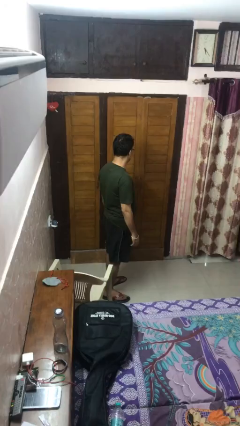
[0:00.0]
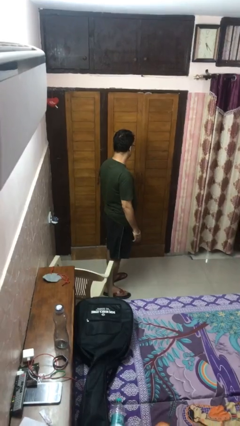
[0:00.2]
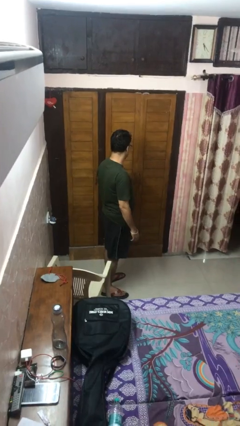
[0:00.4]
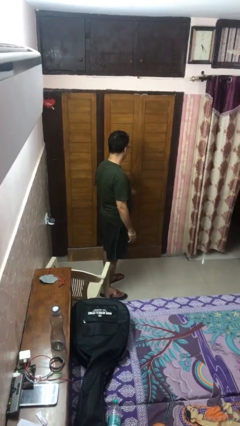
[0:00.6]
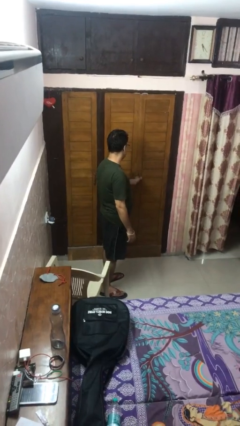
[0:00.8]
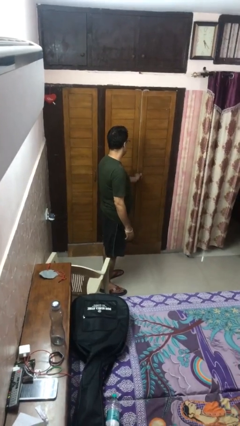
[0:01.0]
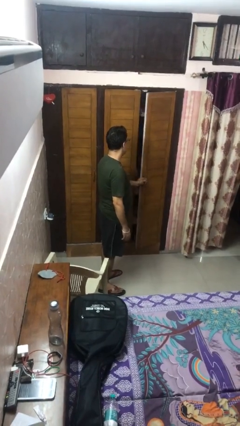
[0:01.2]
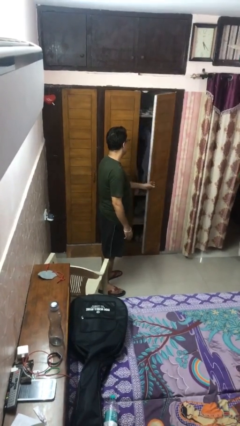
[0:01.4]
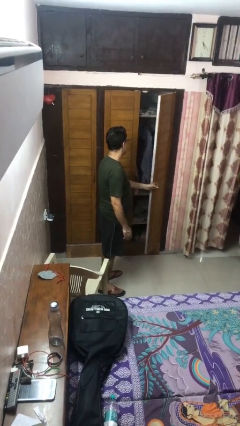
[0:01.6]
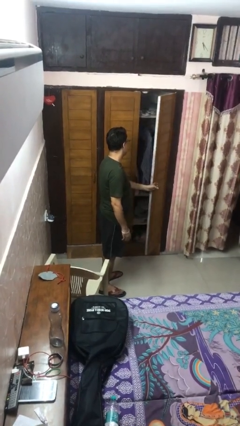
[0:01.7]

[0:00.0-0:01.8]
person opens closet door

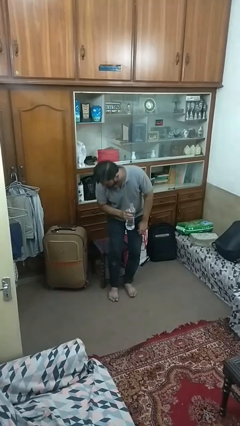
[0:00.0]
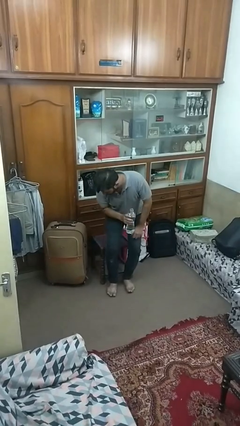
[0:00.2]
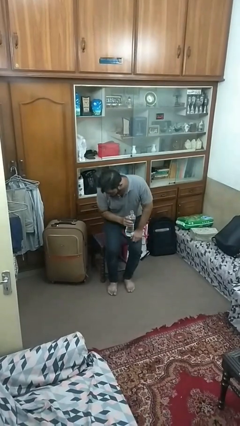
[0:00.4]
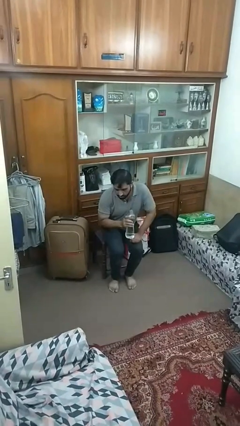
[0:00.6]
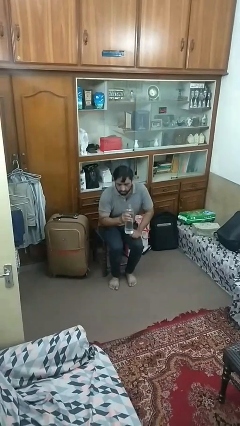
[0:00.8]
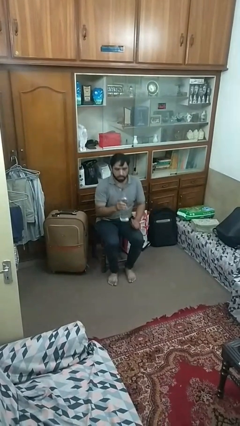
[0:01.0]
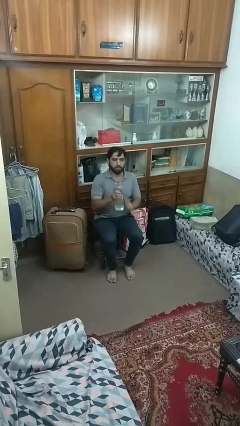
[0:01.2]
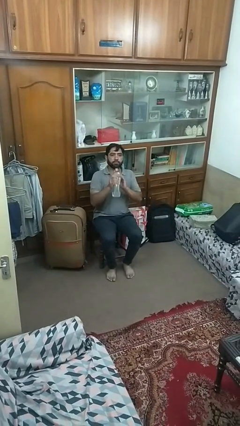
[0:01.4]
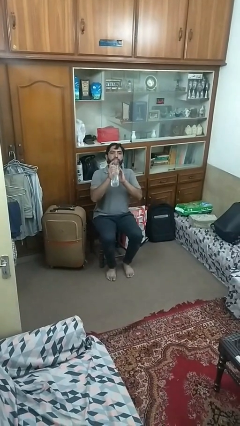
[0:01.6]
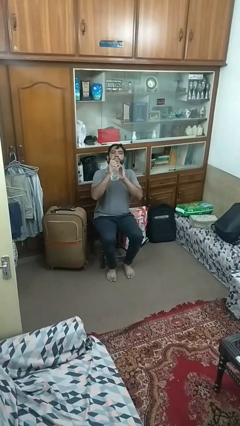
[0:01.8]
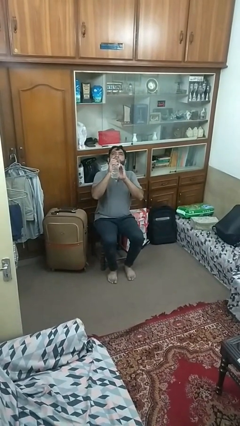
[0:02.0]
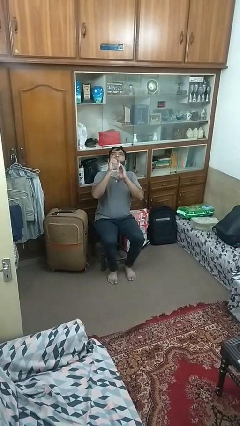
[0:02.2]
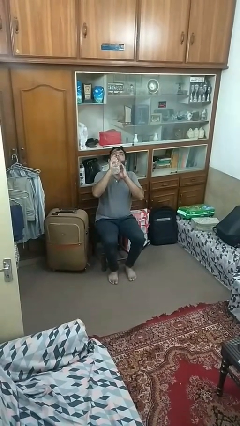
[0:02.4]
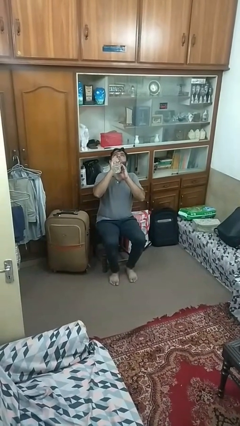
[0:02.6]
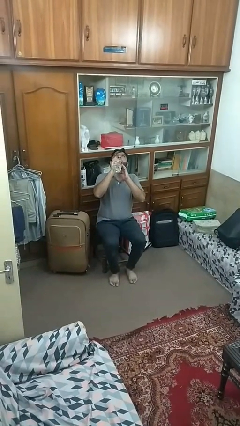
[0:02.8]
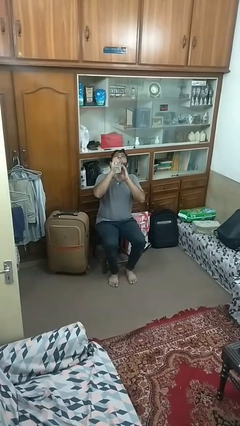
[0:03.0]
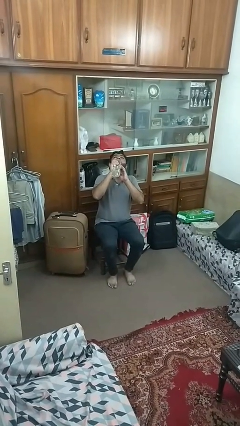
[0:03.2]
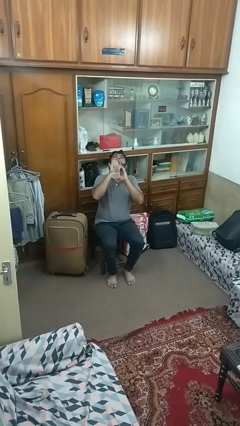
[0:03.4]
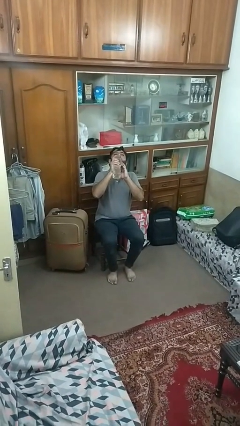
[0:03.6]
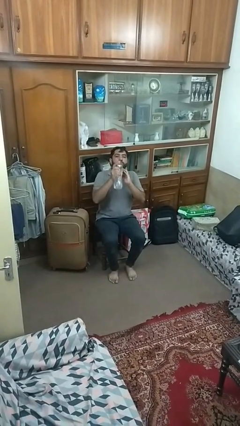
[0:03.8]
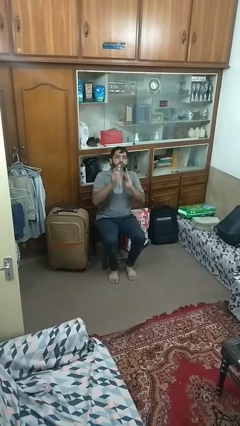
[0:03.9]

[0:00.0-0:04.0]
person drinks from bottle

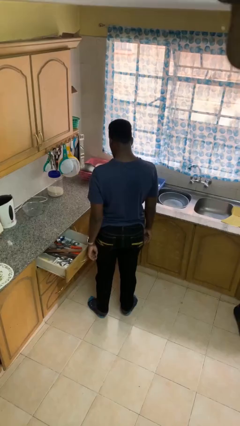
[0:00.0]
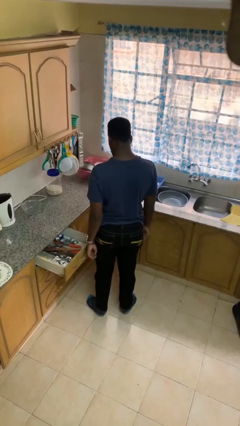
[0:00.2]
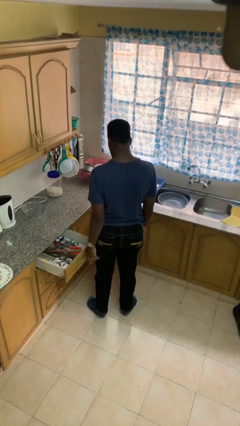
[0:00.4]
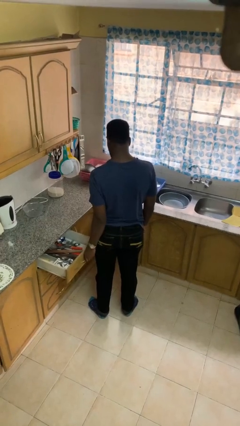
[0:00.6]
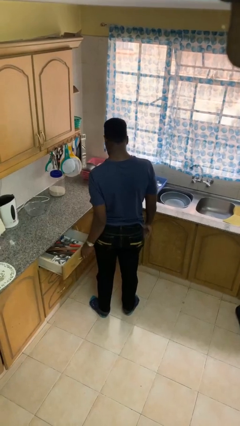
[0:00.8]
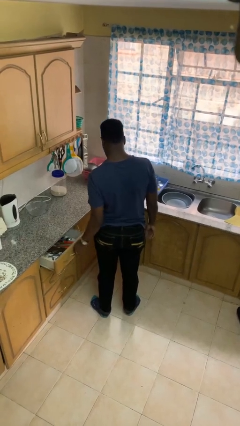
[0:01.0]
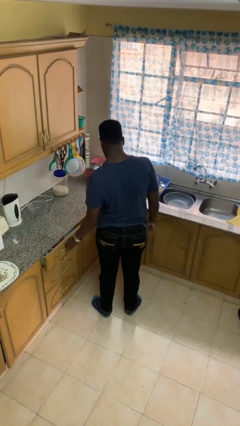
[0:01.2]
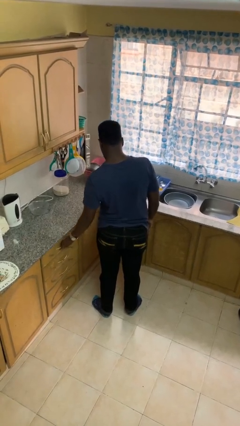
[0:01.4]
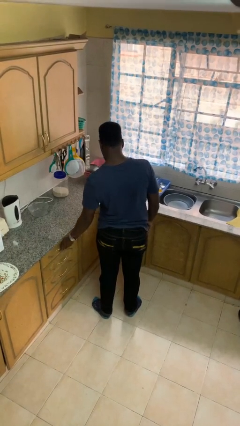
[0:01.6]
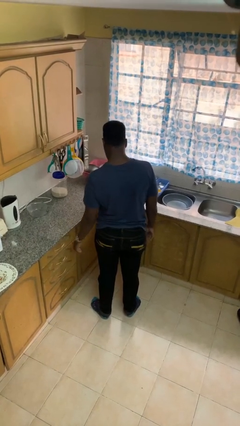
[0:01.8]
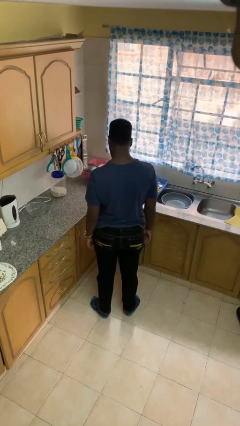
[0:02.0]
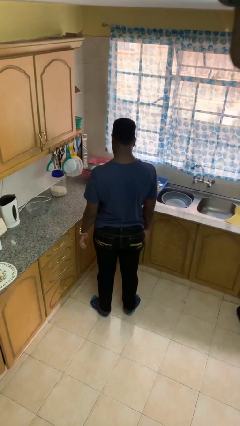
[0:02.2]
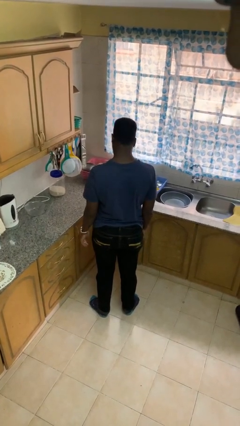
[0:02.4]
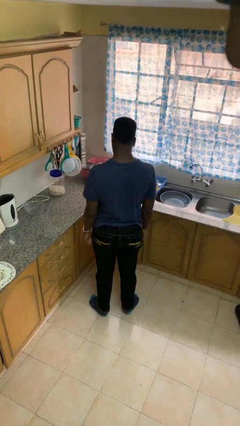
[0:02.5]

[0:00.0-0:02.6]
person closes kitchen drawer

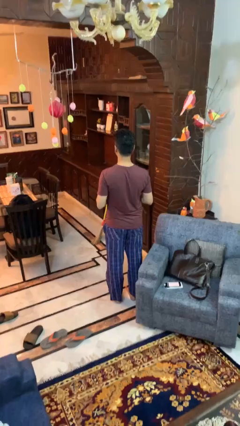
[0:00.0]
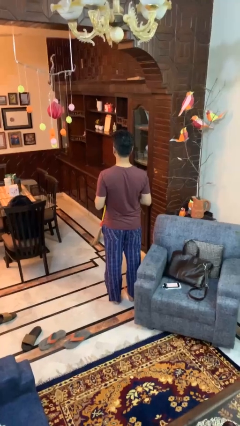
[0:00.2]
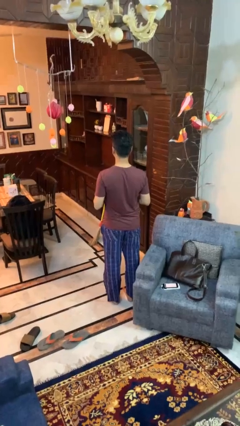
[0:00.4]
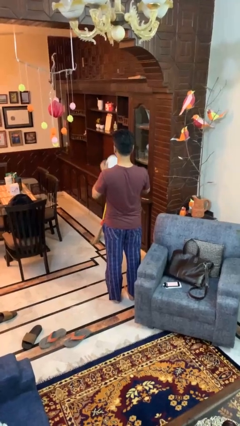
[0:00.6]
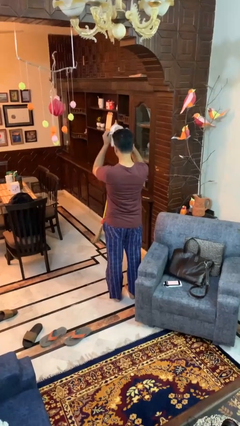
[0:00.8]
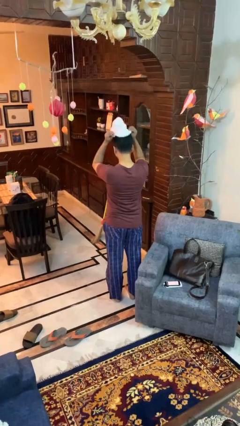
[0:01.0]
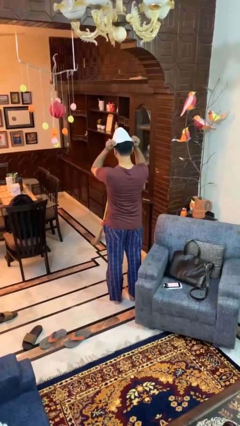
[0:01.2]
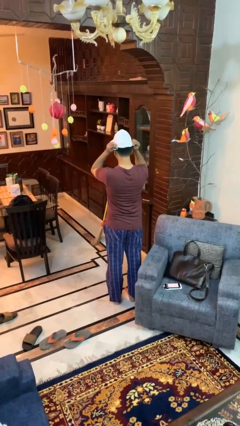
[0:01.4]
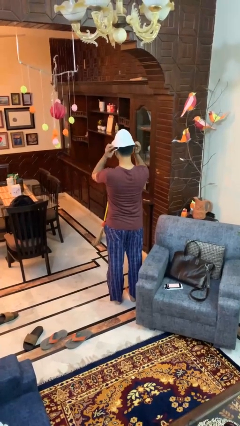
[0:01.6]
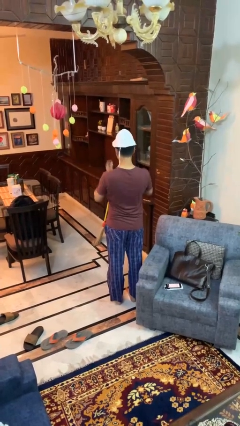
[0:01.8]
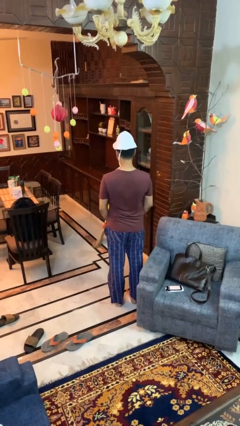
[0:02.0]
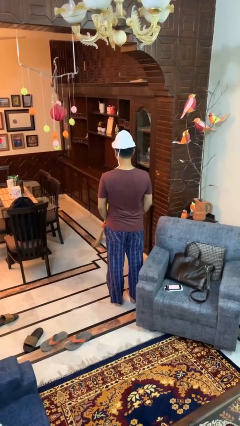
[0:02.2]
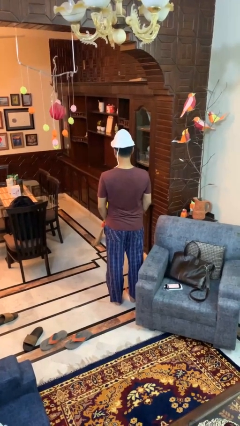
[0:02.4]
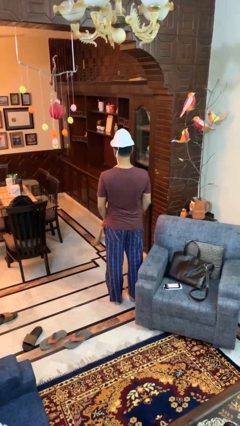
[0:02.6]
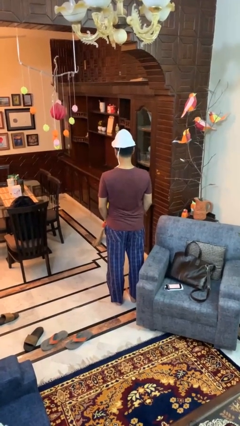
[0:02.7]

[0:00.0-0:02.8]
person puts on hat

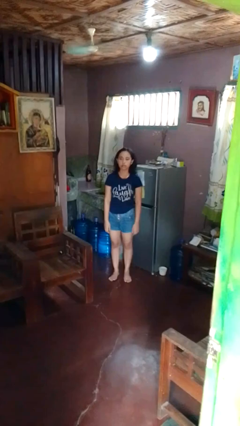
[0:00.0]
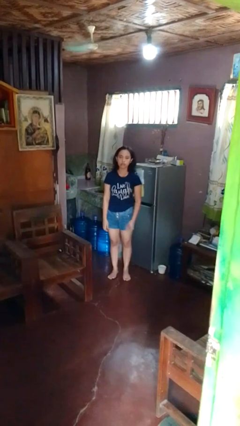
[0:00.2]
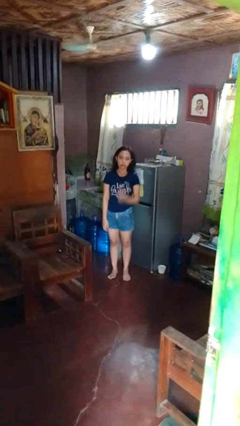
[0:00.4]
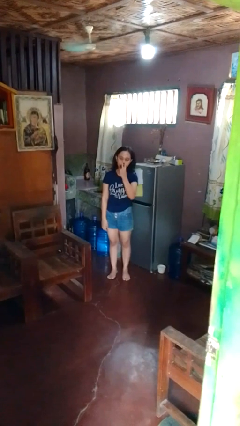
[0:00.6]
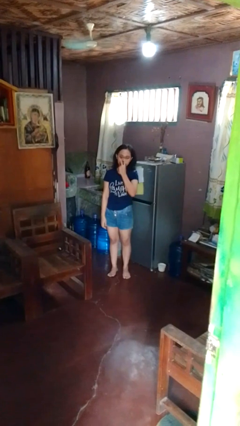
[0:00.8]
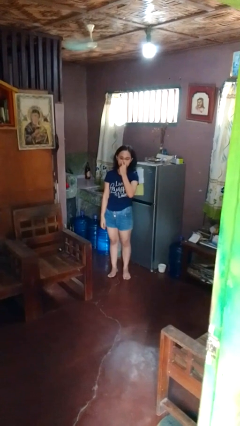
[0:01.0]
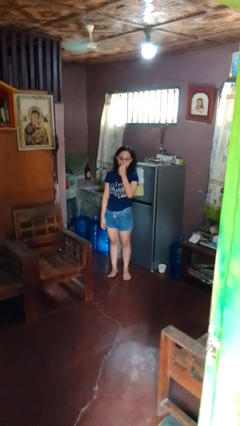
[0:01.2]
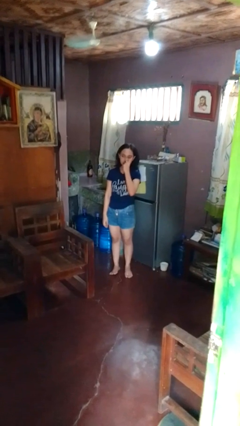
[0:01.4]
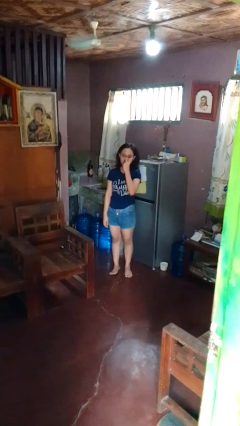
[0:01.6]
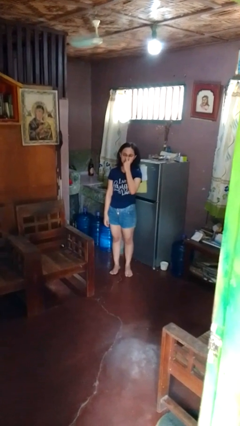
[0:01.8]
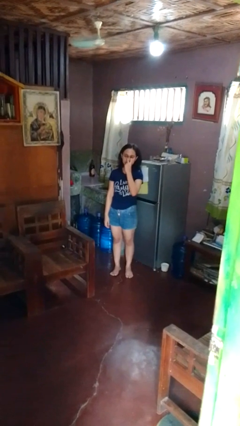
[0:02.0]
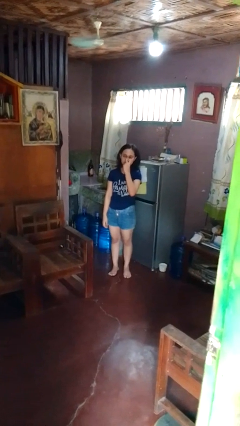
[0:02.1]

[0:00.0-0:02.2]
person gestures watch closely

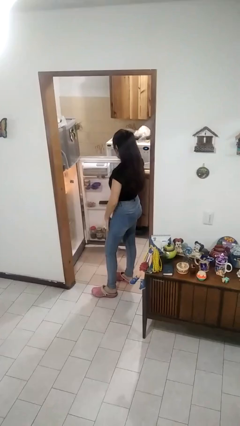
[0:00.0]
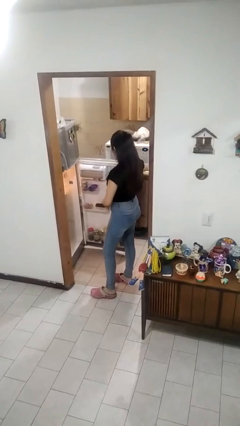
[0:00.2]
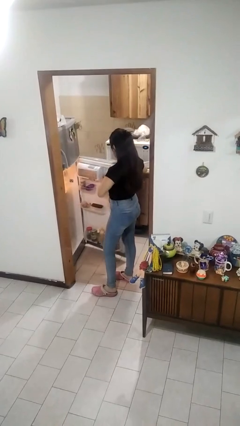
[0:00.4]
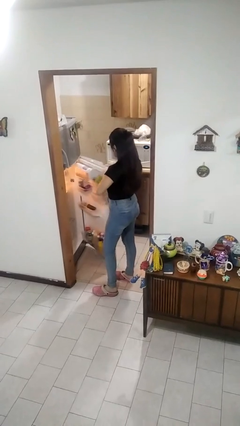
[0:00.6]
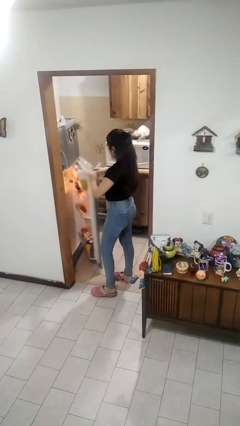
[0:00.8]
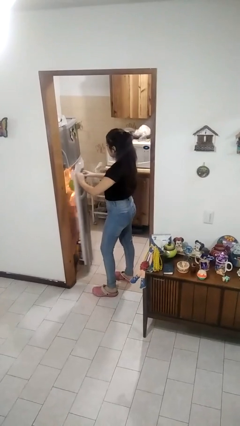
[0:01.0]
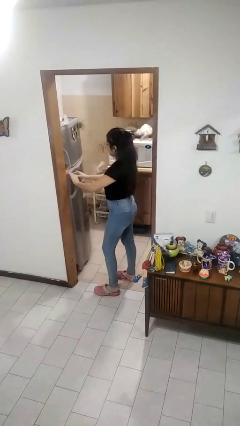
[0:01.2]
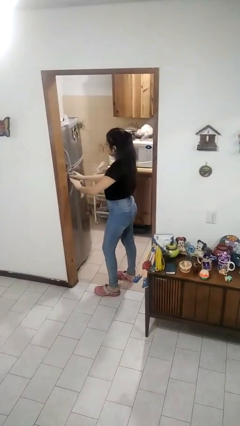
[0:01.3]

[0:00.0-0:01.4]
person closes refrigerator

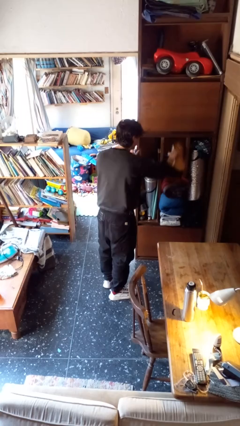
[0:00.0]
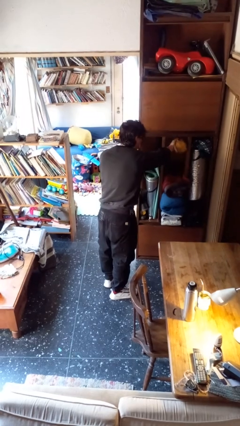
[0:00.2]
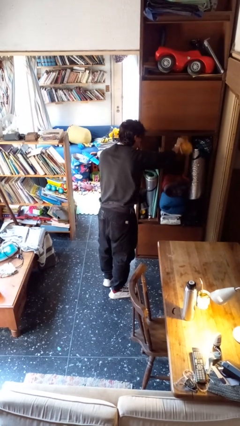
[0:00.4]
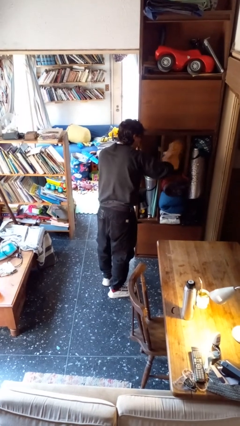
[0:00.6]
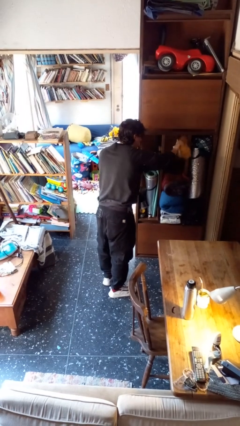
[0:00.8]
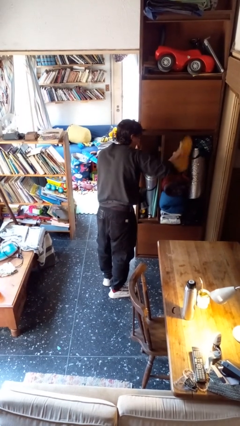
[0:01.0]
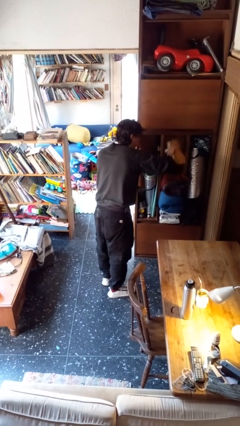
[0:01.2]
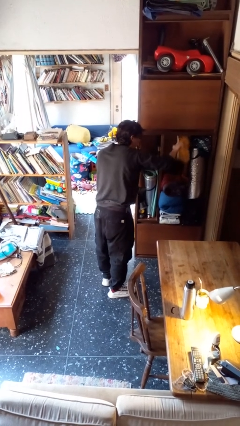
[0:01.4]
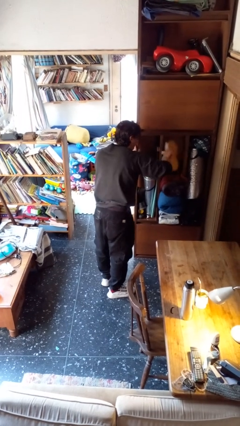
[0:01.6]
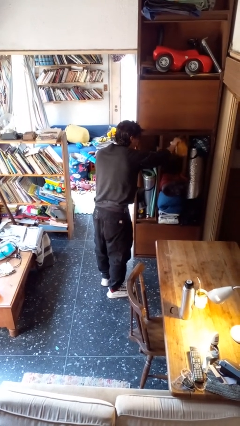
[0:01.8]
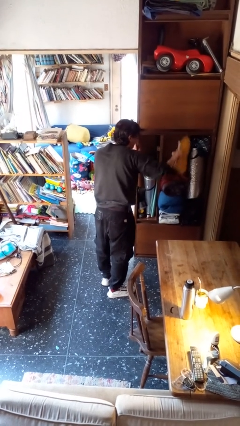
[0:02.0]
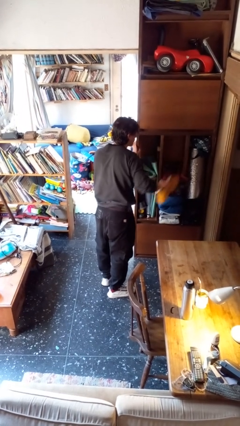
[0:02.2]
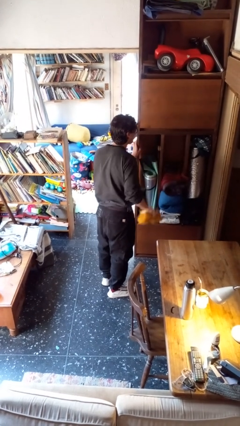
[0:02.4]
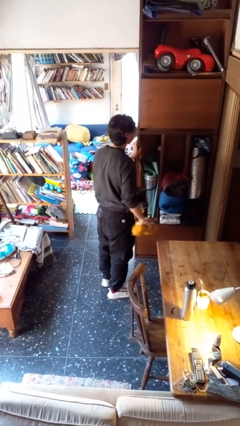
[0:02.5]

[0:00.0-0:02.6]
person dusts furniture
